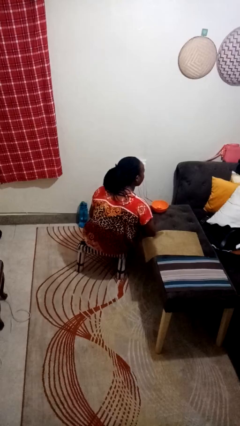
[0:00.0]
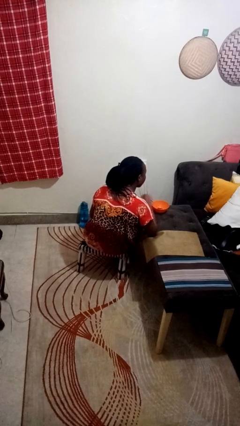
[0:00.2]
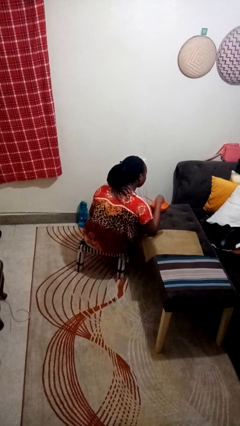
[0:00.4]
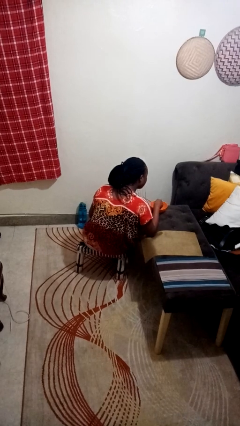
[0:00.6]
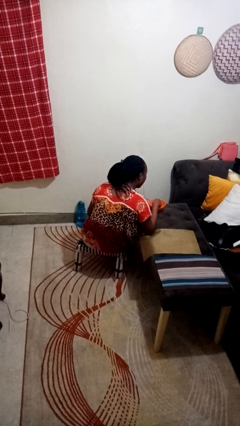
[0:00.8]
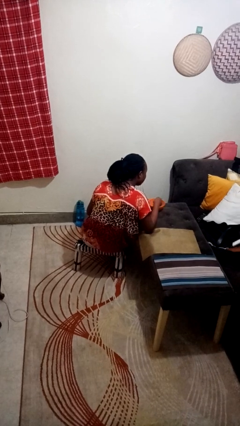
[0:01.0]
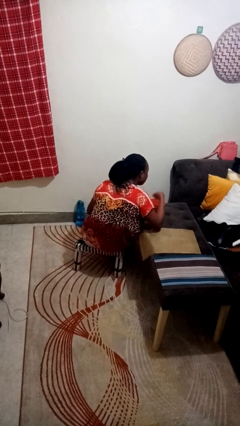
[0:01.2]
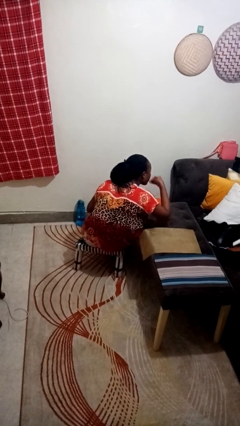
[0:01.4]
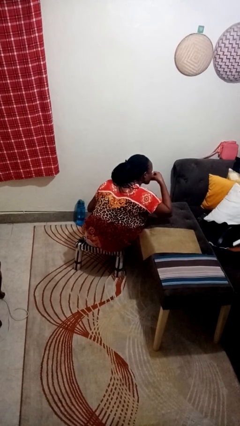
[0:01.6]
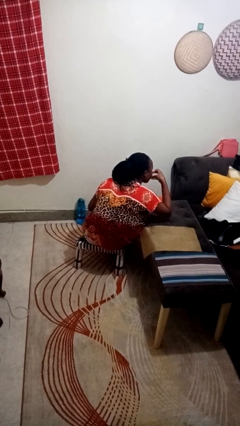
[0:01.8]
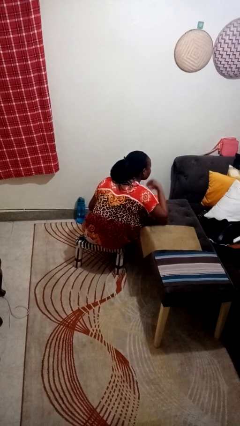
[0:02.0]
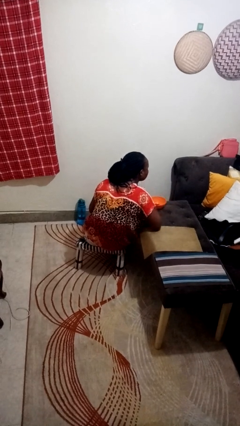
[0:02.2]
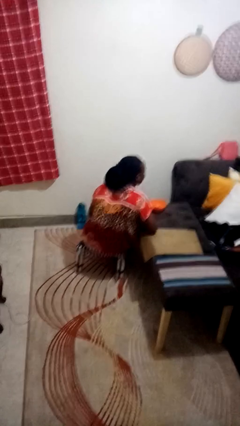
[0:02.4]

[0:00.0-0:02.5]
person eats with hands

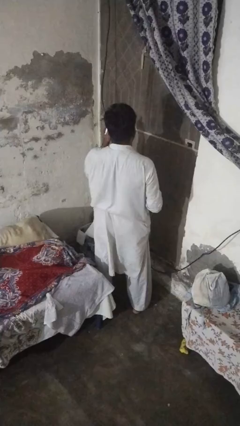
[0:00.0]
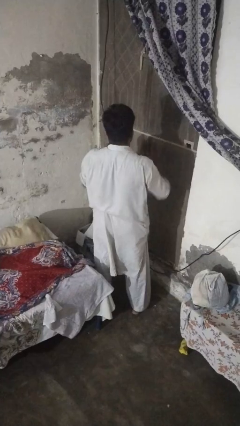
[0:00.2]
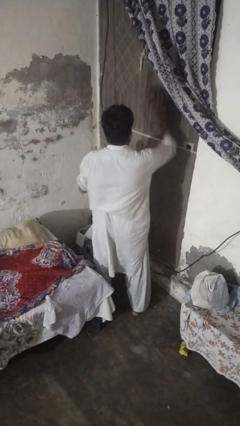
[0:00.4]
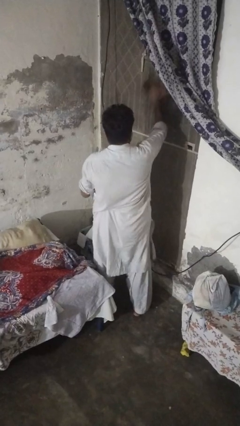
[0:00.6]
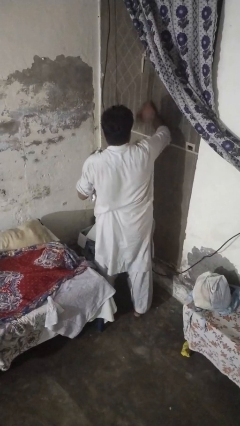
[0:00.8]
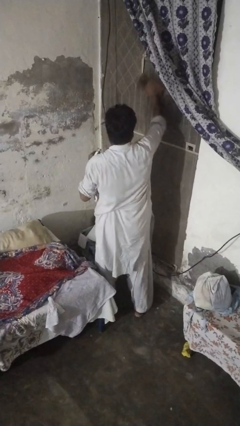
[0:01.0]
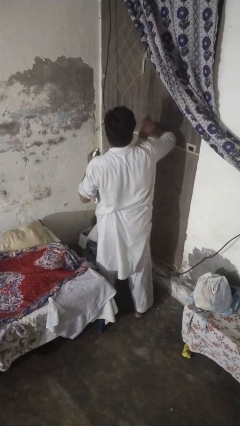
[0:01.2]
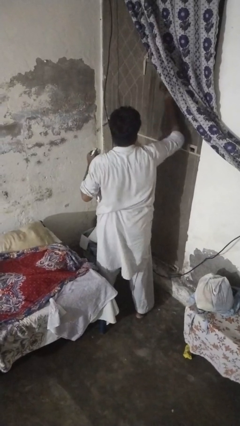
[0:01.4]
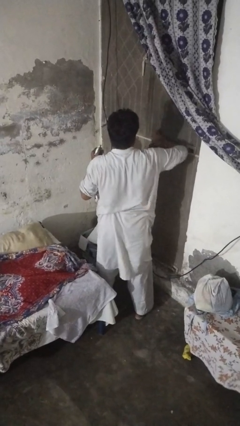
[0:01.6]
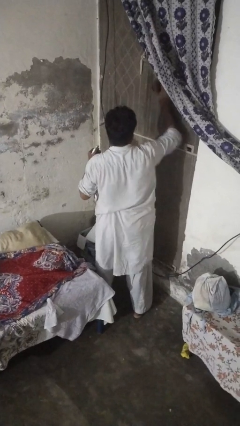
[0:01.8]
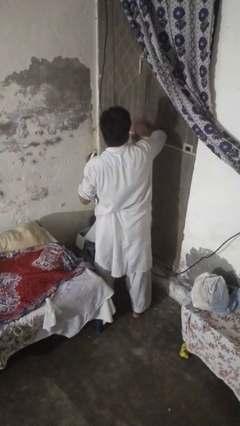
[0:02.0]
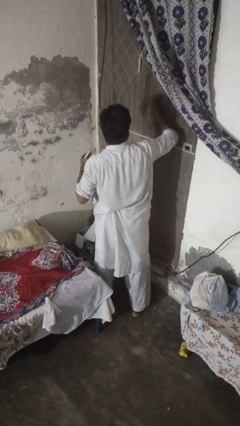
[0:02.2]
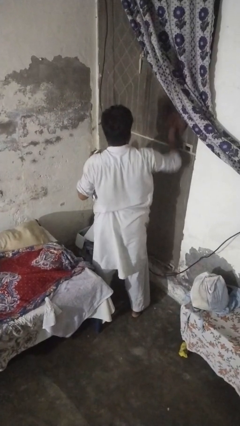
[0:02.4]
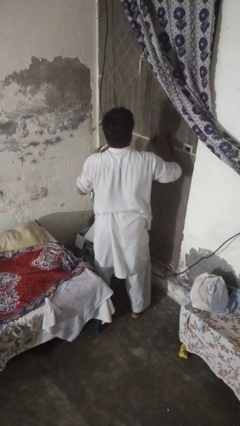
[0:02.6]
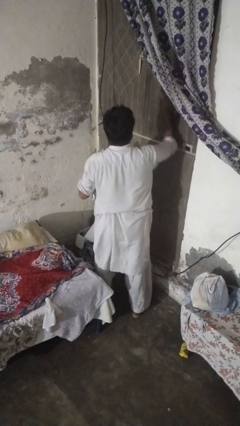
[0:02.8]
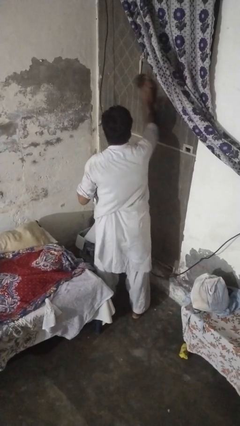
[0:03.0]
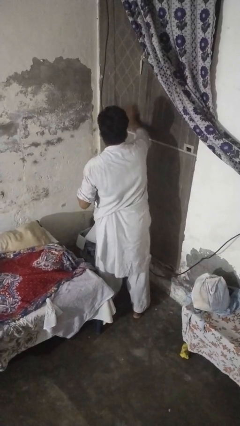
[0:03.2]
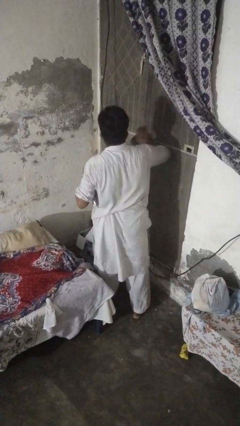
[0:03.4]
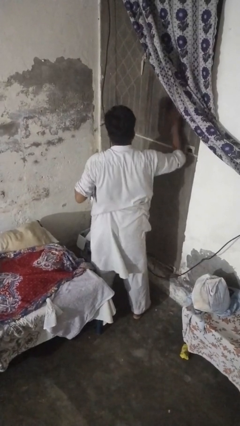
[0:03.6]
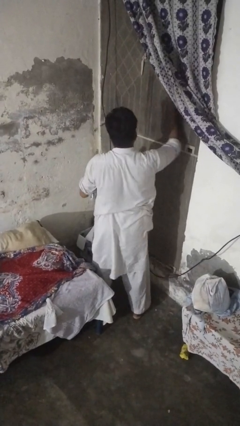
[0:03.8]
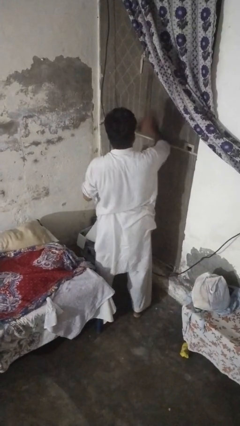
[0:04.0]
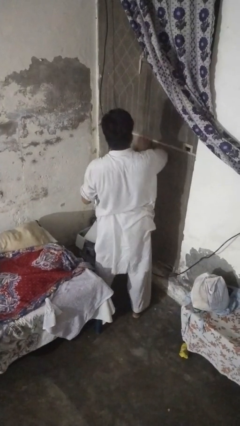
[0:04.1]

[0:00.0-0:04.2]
person washes window

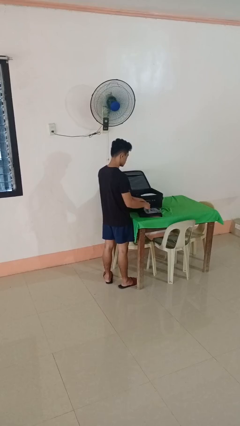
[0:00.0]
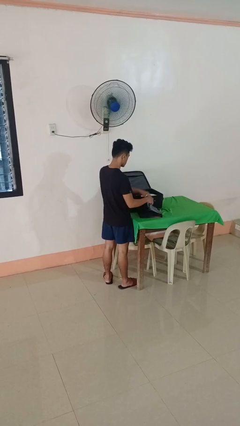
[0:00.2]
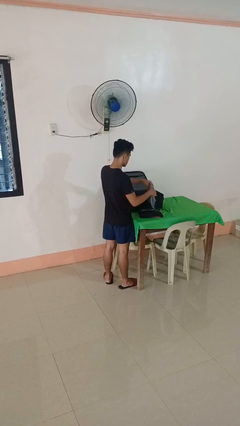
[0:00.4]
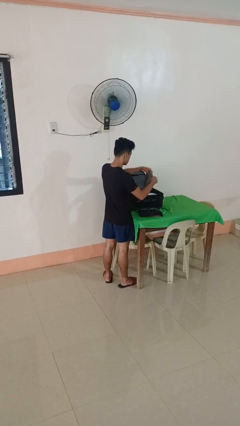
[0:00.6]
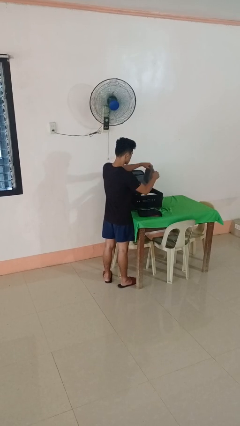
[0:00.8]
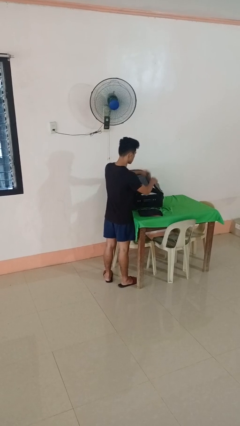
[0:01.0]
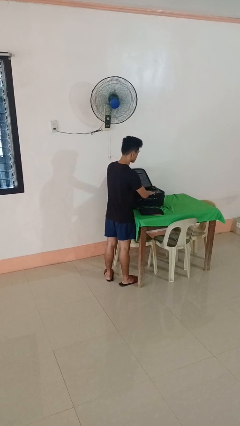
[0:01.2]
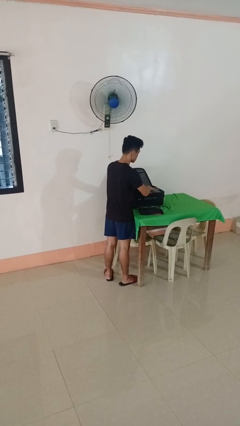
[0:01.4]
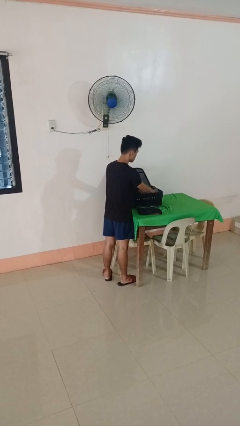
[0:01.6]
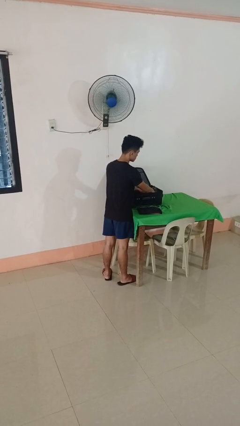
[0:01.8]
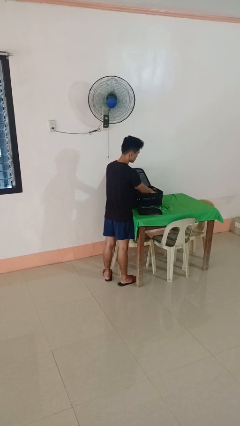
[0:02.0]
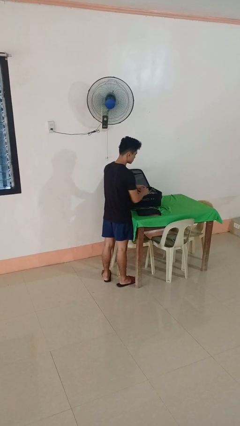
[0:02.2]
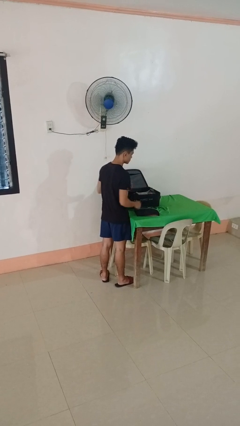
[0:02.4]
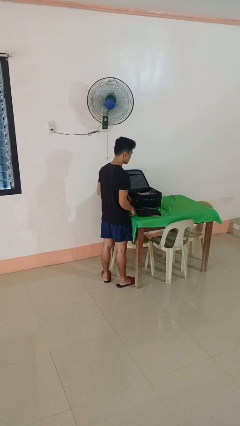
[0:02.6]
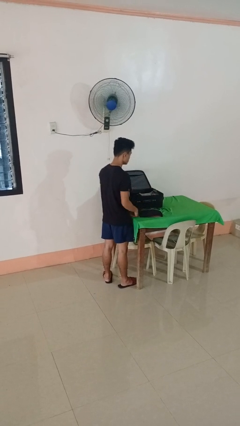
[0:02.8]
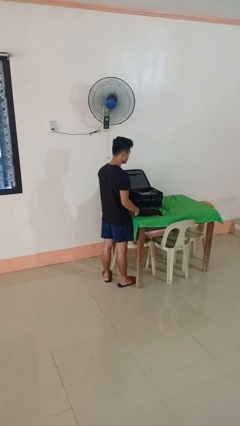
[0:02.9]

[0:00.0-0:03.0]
person loads clothes into suitcase

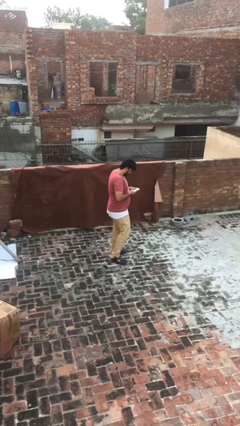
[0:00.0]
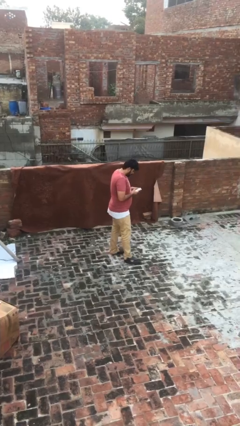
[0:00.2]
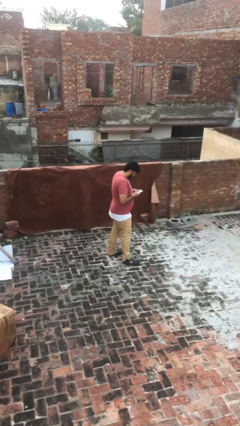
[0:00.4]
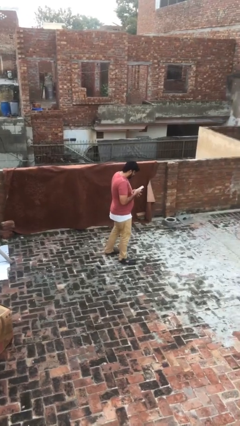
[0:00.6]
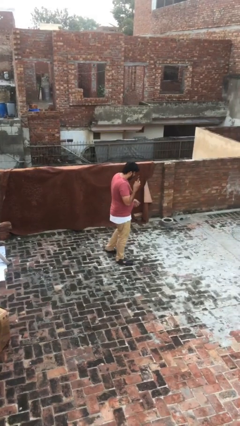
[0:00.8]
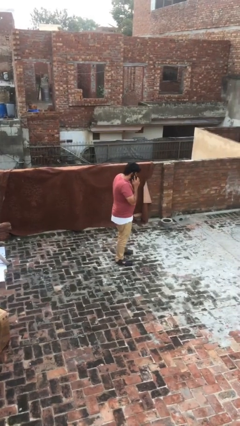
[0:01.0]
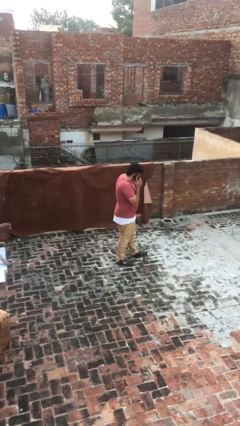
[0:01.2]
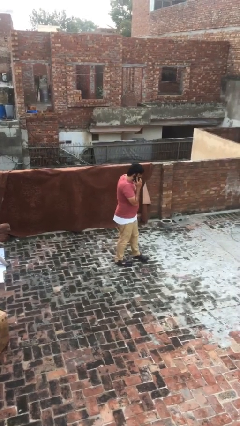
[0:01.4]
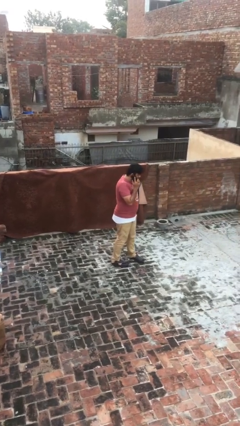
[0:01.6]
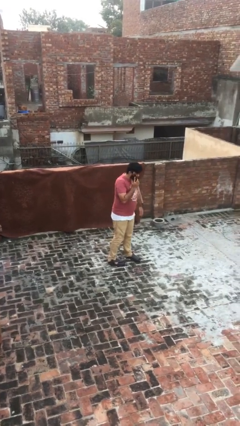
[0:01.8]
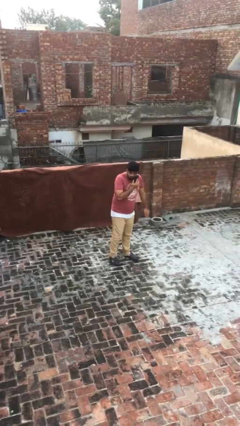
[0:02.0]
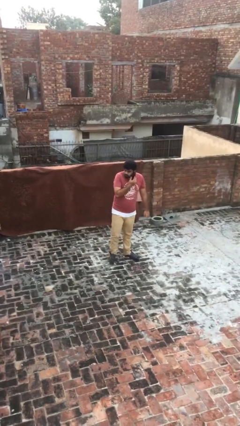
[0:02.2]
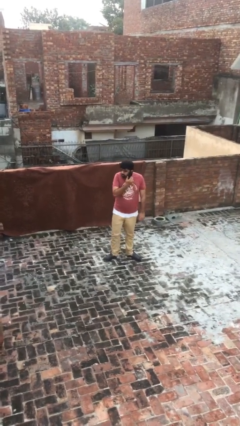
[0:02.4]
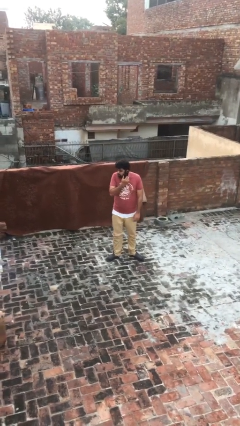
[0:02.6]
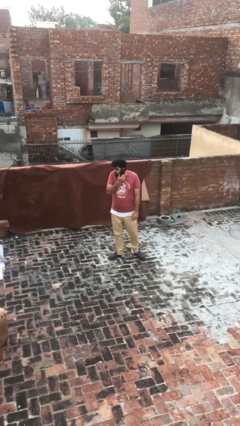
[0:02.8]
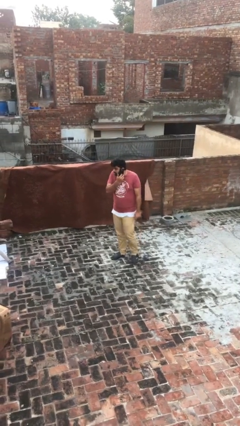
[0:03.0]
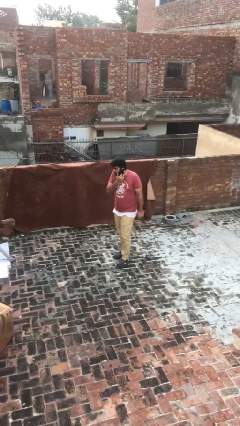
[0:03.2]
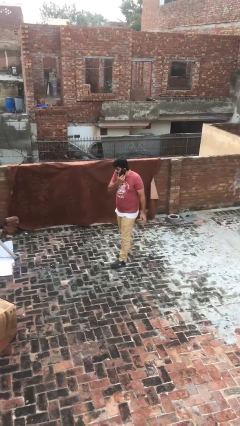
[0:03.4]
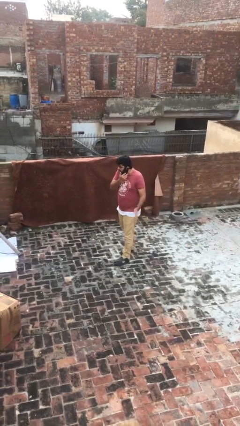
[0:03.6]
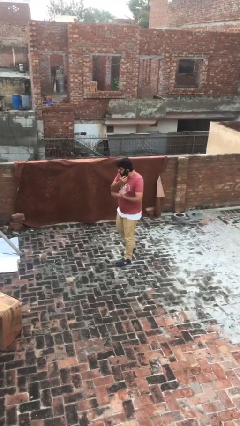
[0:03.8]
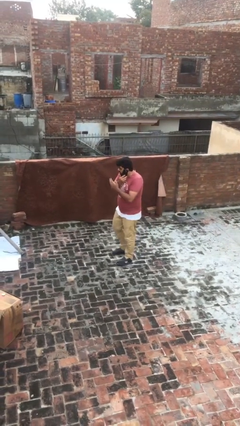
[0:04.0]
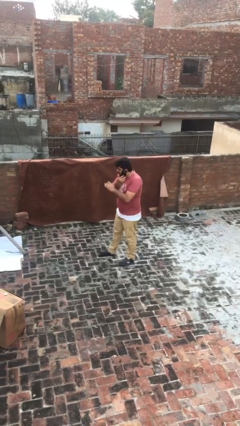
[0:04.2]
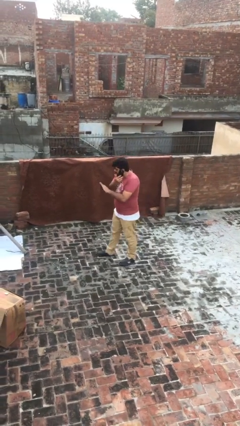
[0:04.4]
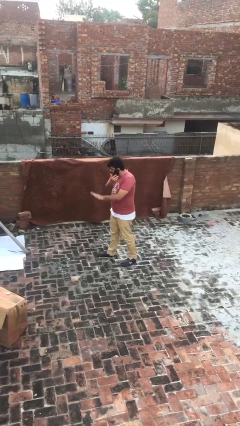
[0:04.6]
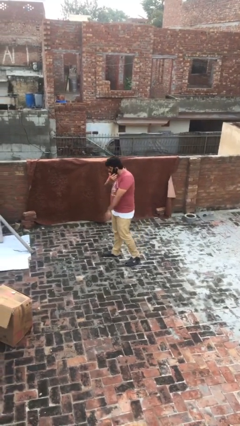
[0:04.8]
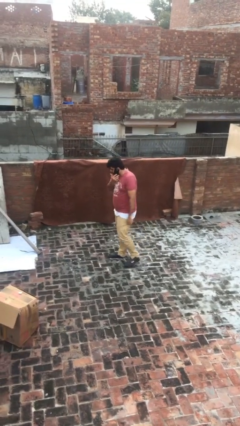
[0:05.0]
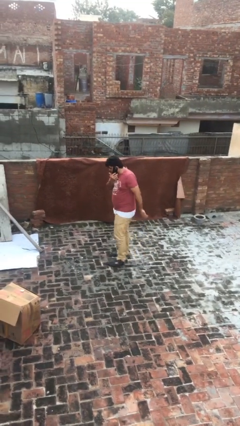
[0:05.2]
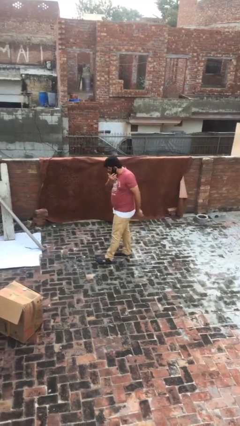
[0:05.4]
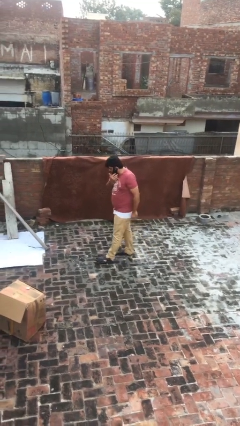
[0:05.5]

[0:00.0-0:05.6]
person talks on phone

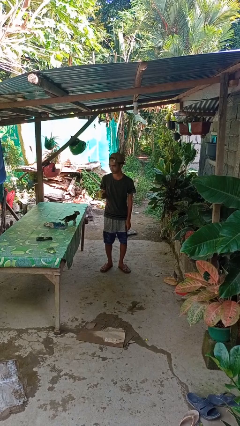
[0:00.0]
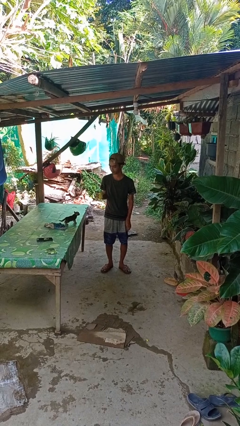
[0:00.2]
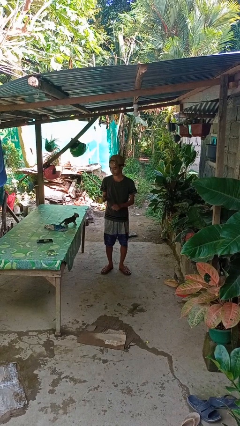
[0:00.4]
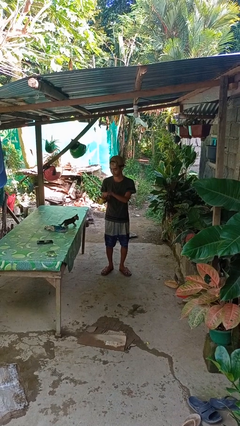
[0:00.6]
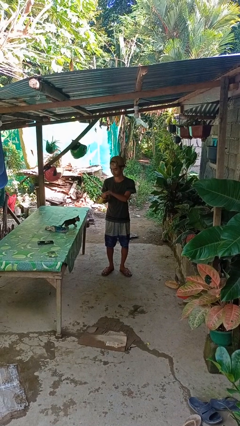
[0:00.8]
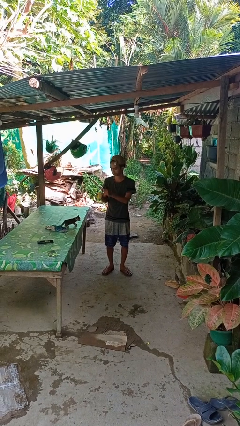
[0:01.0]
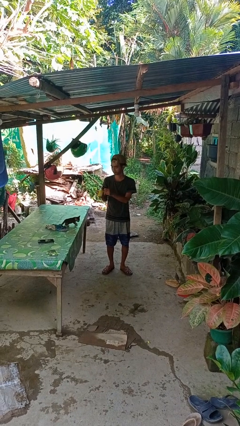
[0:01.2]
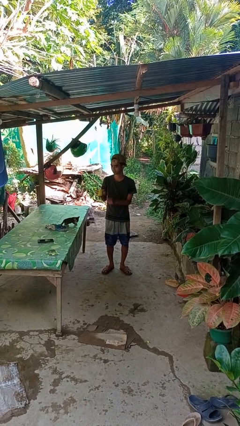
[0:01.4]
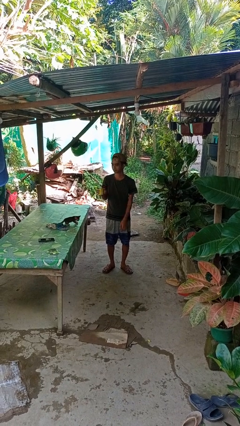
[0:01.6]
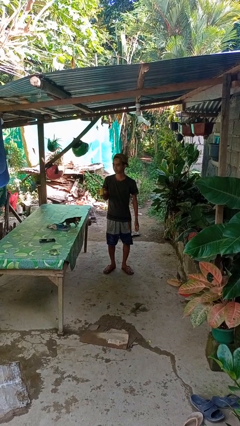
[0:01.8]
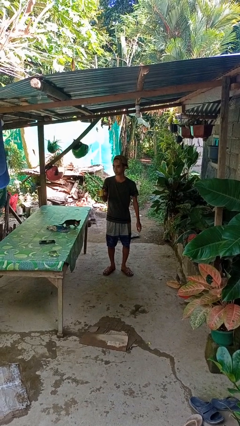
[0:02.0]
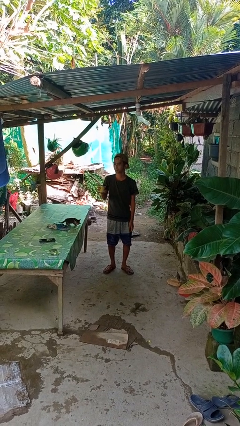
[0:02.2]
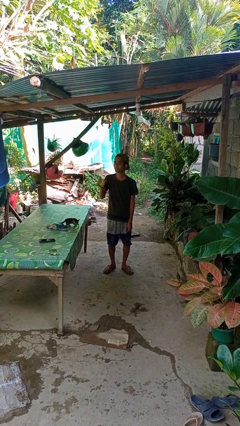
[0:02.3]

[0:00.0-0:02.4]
person opens beverage can
